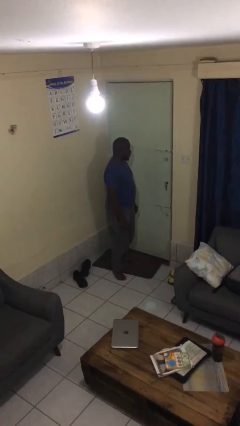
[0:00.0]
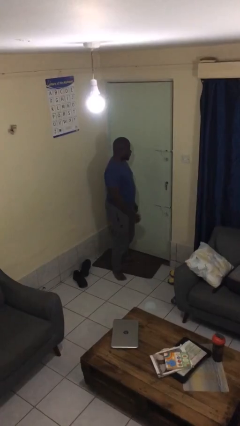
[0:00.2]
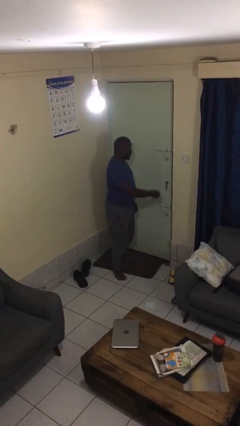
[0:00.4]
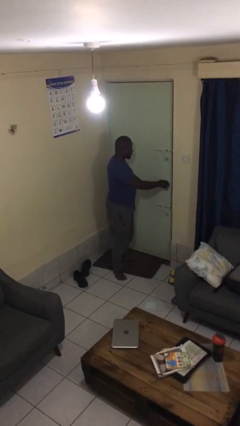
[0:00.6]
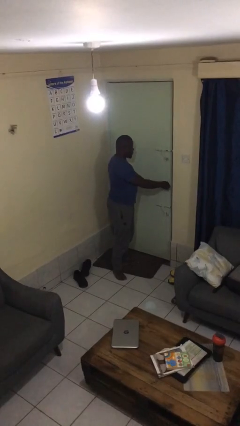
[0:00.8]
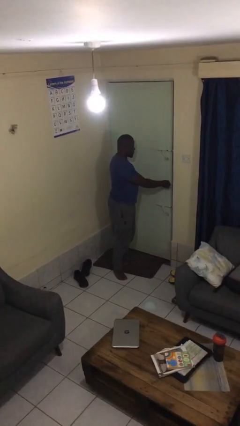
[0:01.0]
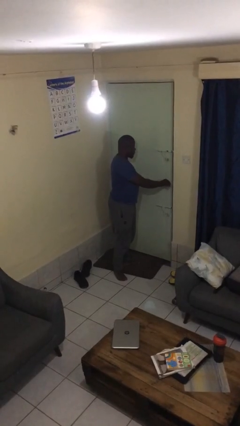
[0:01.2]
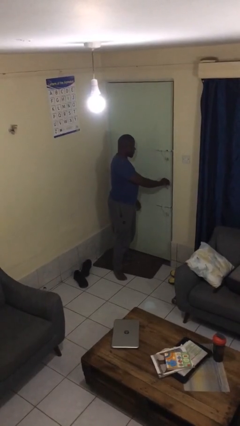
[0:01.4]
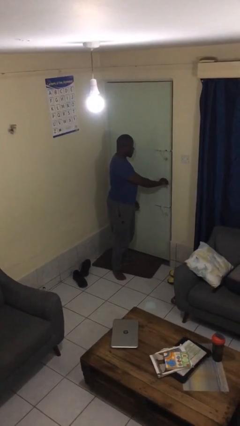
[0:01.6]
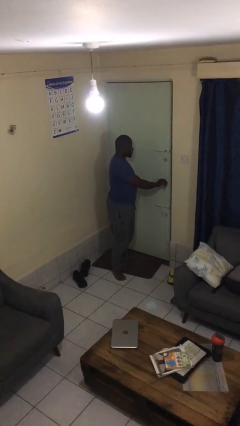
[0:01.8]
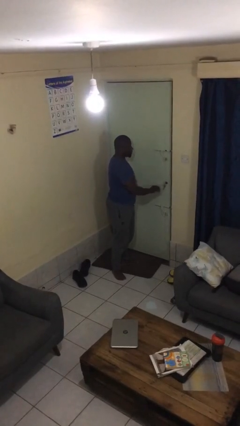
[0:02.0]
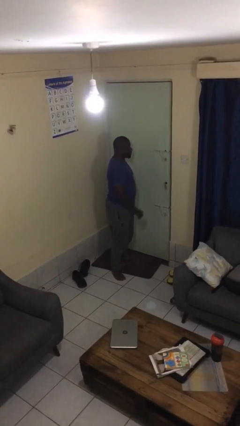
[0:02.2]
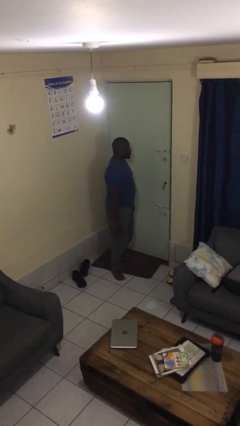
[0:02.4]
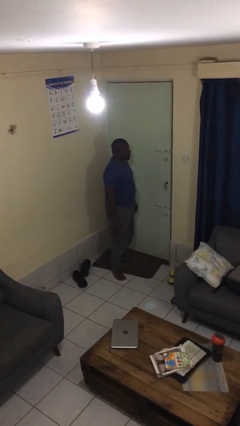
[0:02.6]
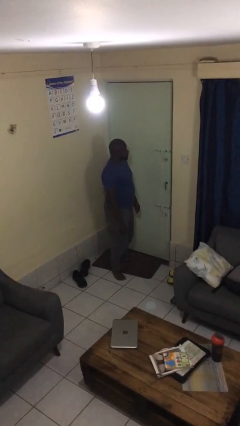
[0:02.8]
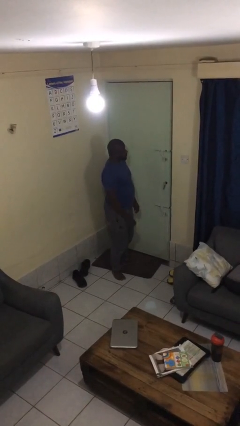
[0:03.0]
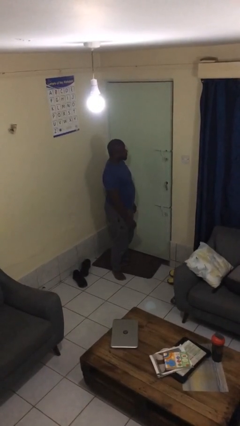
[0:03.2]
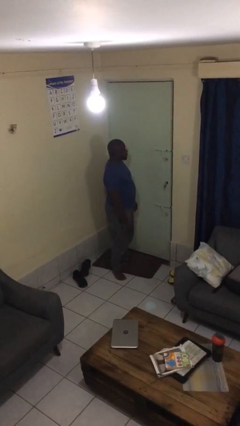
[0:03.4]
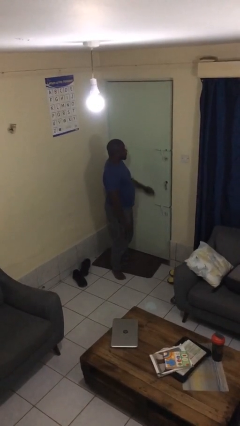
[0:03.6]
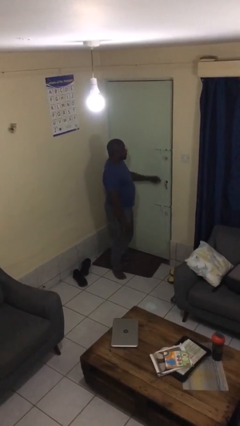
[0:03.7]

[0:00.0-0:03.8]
person unlocks door with keys

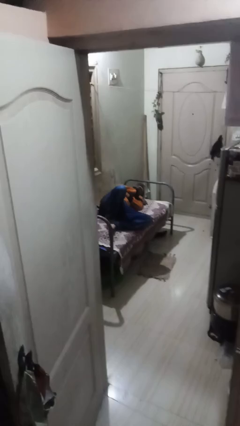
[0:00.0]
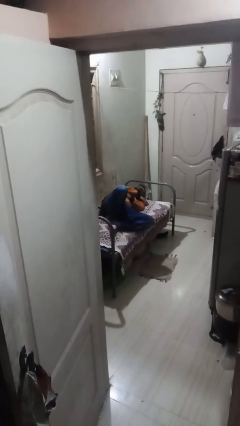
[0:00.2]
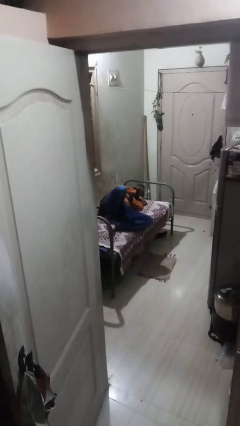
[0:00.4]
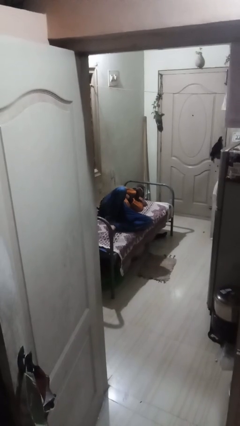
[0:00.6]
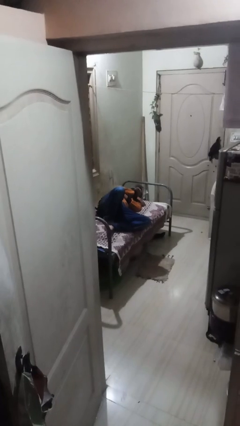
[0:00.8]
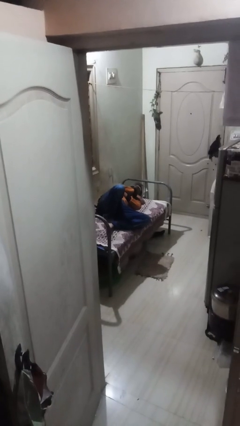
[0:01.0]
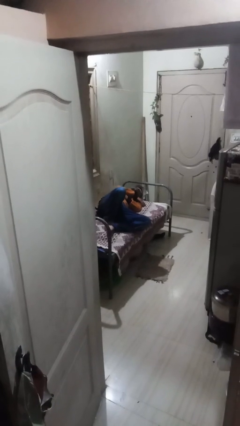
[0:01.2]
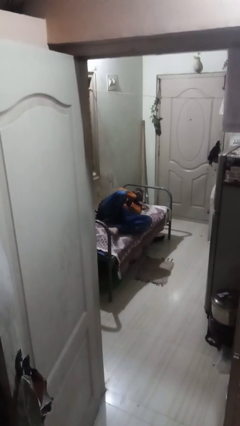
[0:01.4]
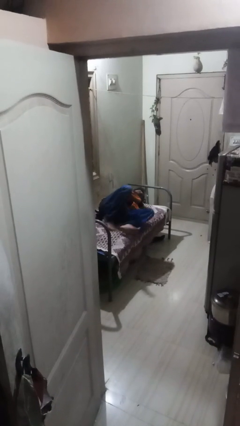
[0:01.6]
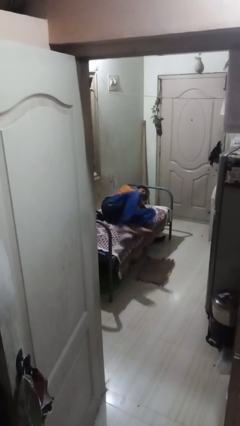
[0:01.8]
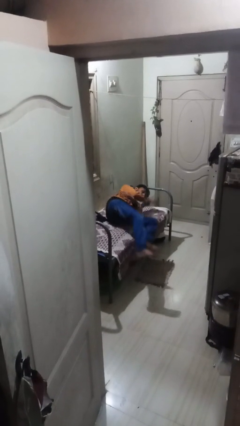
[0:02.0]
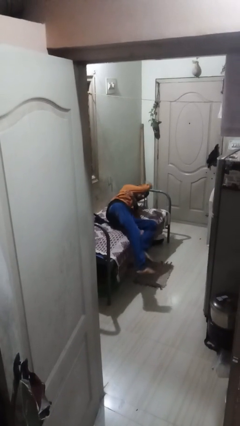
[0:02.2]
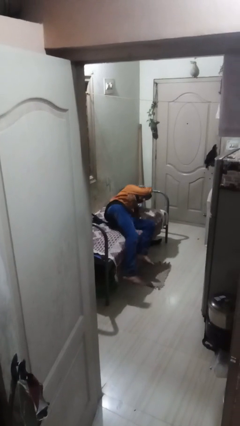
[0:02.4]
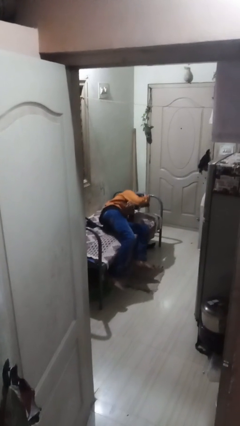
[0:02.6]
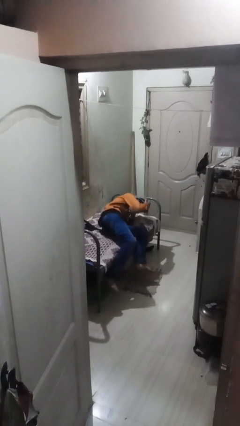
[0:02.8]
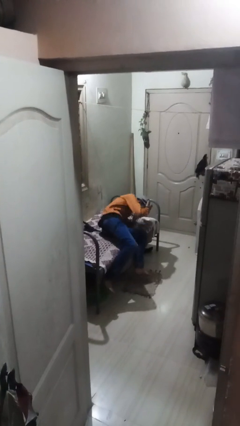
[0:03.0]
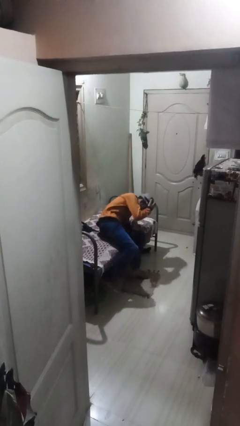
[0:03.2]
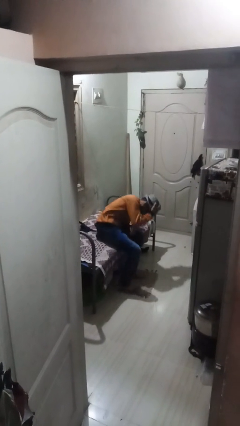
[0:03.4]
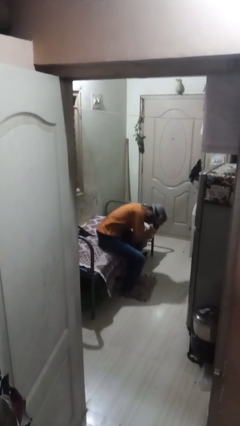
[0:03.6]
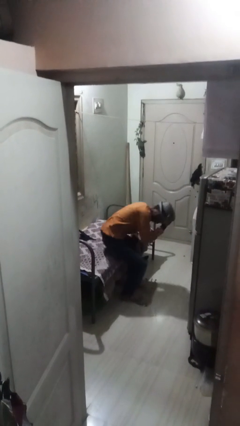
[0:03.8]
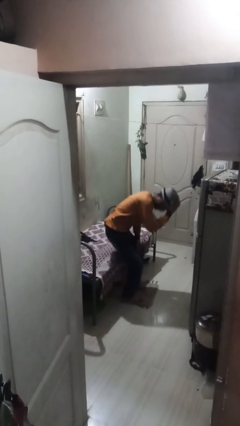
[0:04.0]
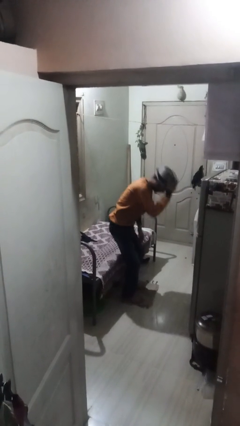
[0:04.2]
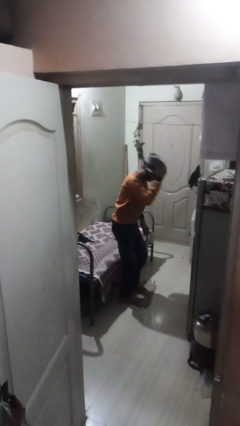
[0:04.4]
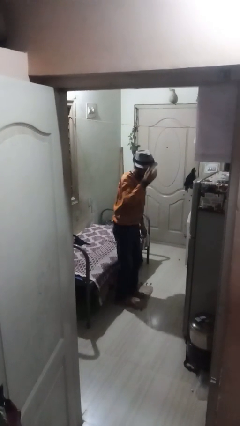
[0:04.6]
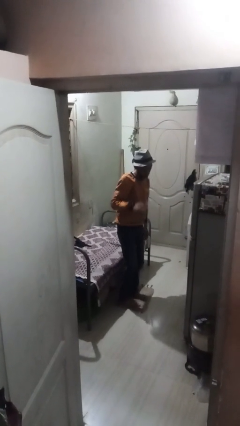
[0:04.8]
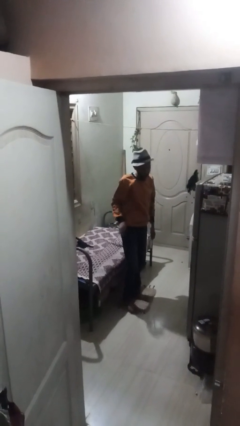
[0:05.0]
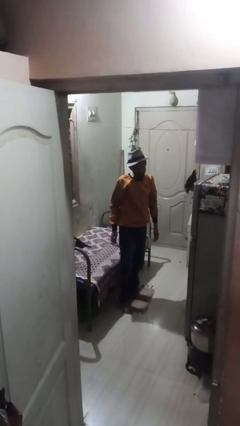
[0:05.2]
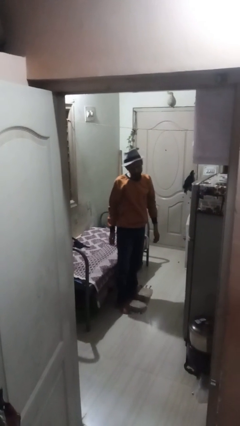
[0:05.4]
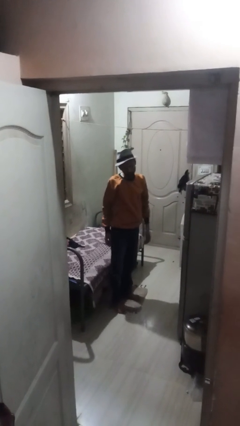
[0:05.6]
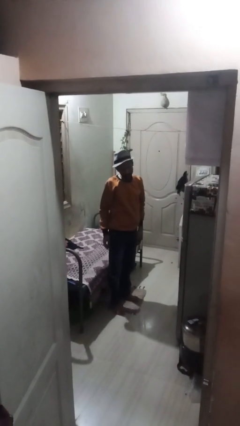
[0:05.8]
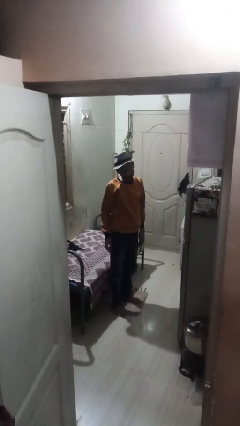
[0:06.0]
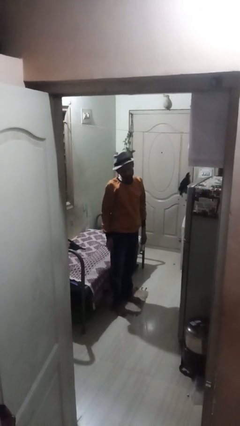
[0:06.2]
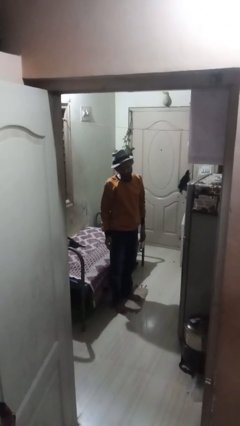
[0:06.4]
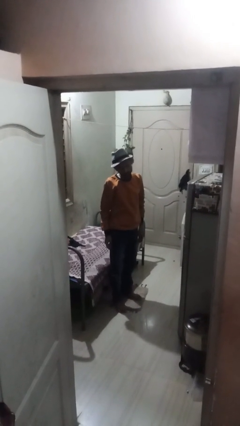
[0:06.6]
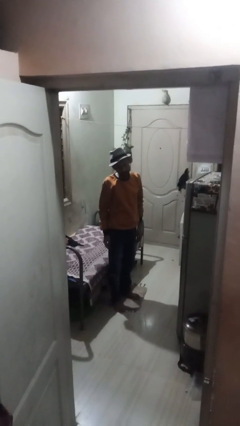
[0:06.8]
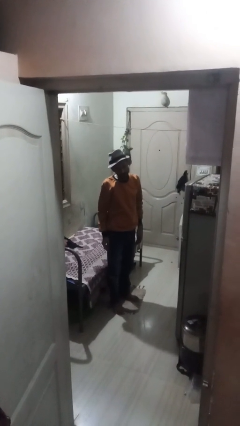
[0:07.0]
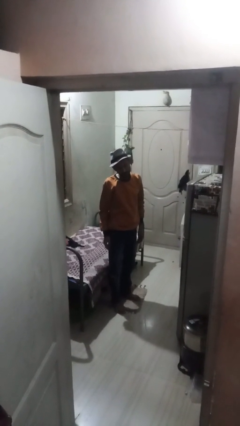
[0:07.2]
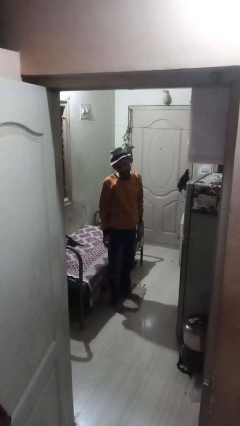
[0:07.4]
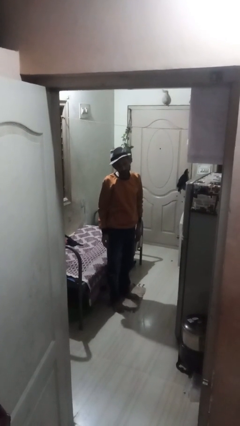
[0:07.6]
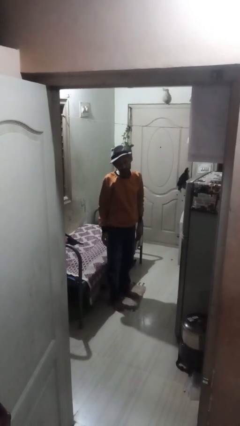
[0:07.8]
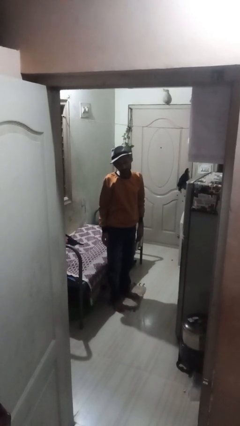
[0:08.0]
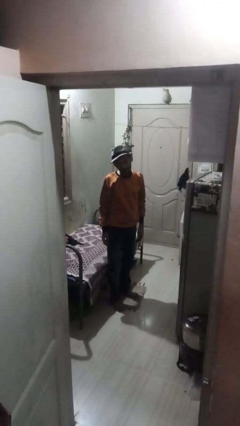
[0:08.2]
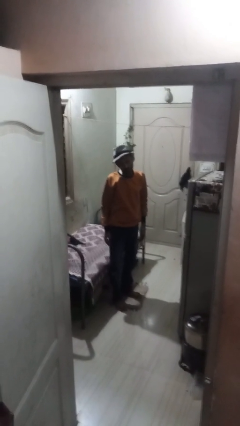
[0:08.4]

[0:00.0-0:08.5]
person stands up

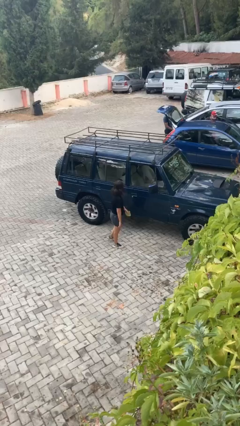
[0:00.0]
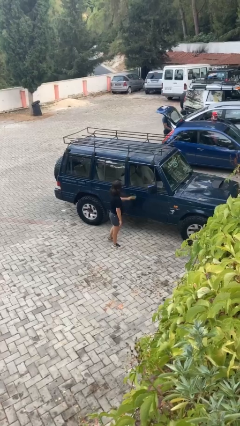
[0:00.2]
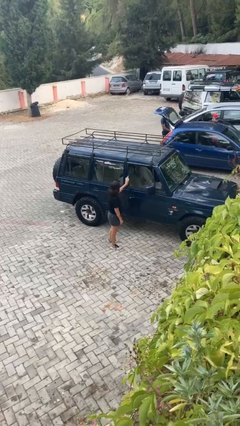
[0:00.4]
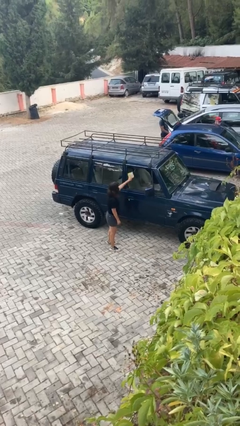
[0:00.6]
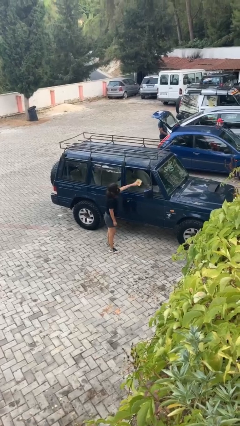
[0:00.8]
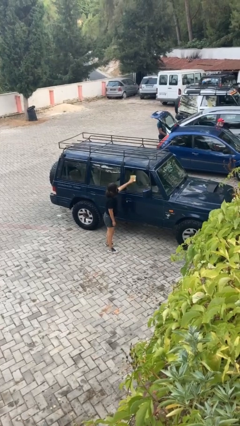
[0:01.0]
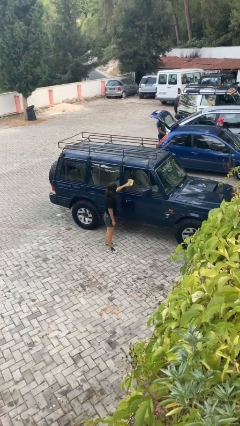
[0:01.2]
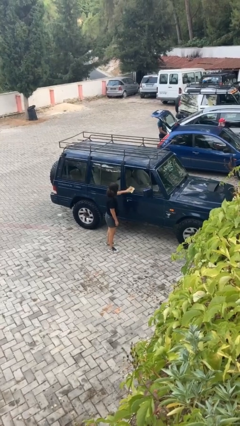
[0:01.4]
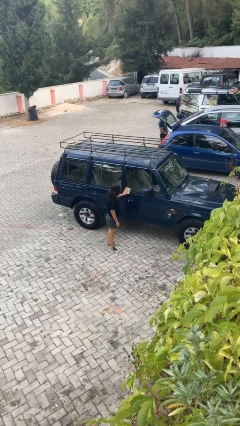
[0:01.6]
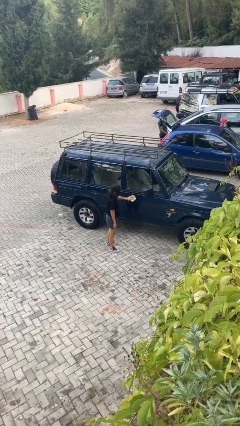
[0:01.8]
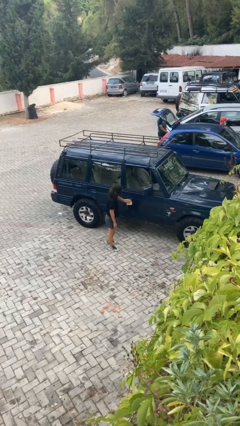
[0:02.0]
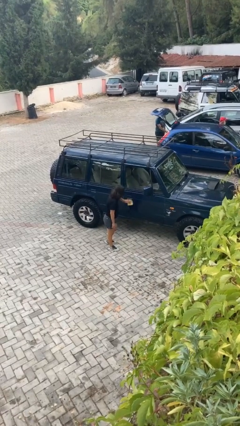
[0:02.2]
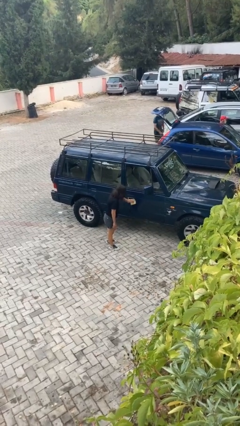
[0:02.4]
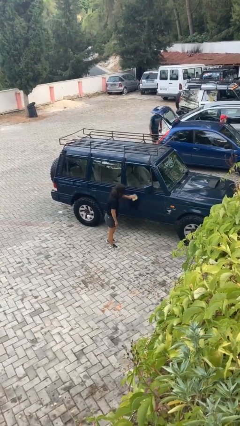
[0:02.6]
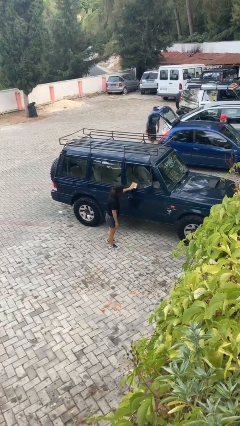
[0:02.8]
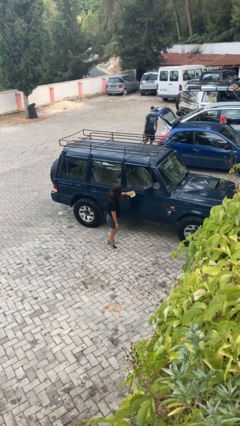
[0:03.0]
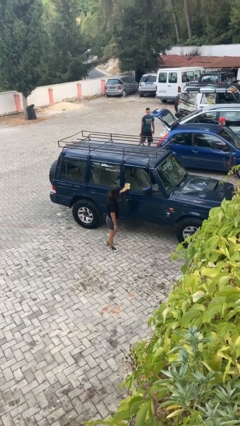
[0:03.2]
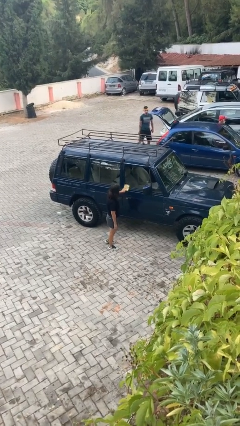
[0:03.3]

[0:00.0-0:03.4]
person polishes car with rag

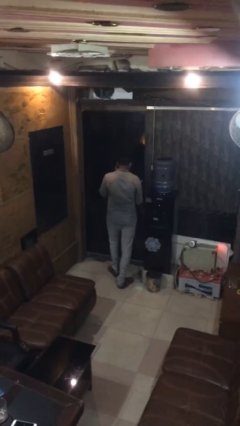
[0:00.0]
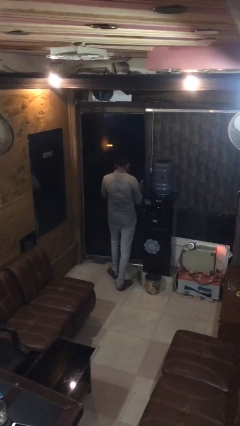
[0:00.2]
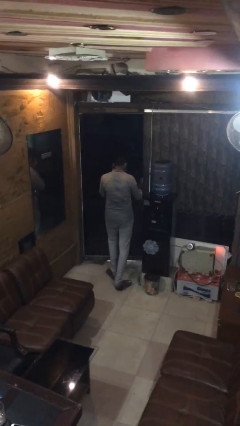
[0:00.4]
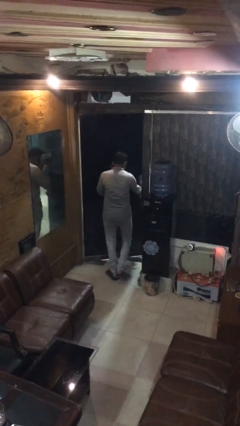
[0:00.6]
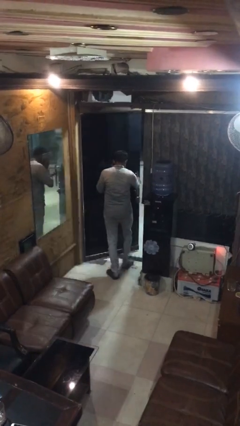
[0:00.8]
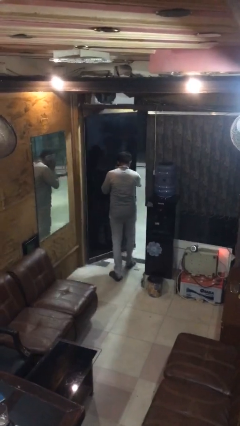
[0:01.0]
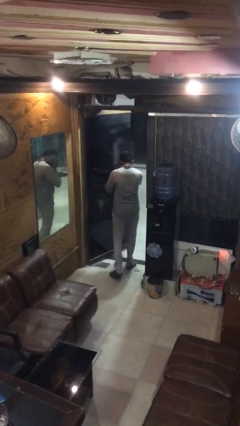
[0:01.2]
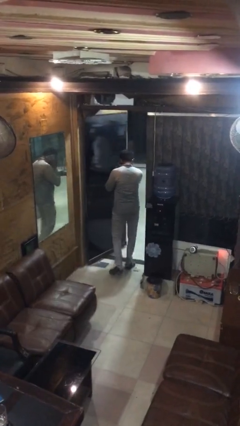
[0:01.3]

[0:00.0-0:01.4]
person opens facility door

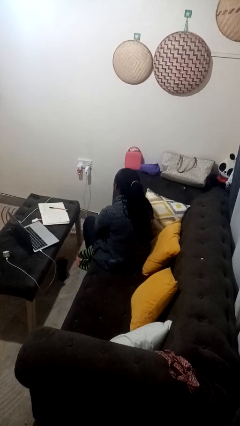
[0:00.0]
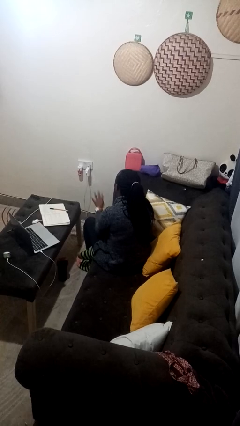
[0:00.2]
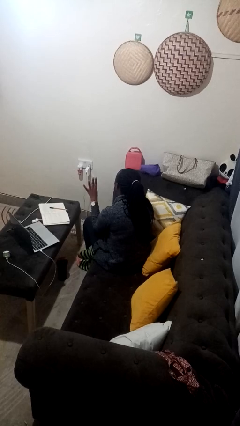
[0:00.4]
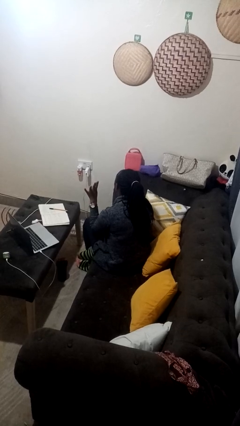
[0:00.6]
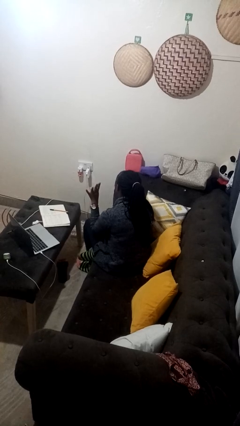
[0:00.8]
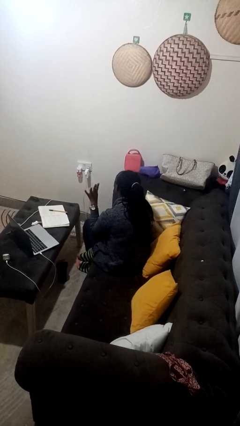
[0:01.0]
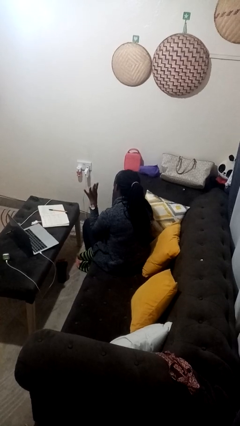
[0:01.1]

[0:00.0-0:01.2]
person gestures number four
